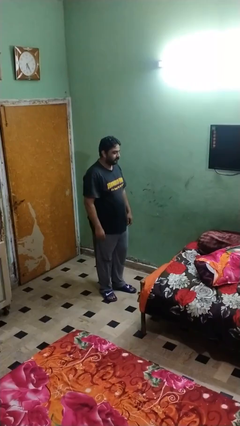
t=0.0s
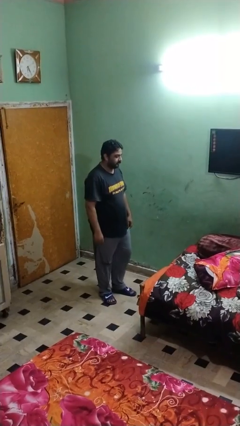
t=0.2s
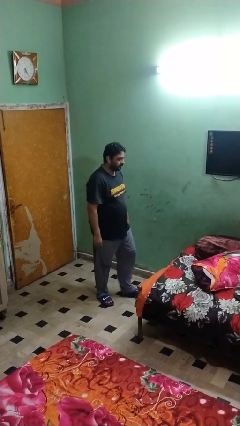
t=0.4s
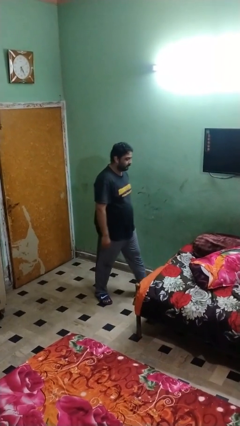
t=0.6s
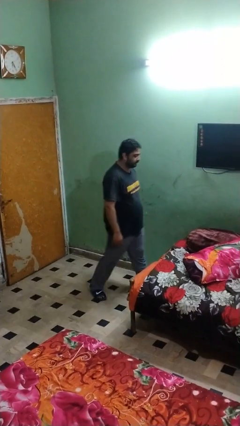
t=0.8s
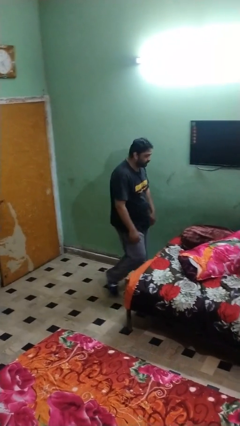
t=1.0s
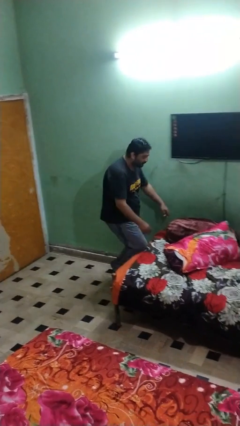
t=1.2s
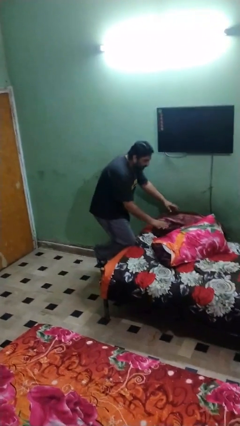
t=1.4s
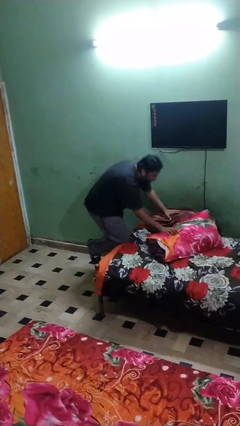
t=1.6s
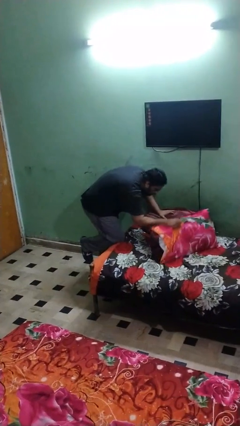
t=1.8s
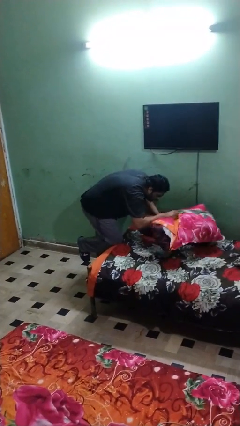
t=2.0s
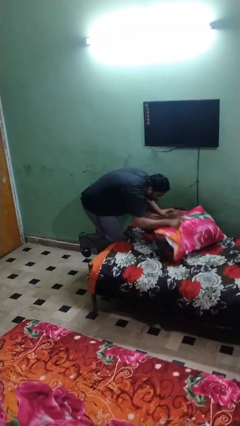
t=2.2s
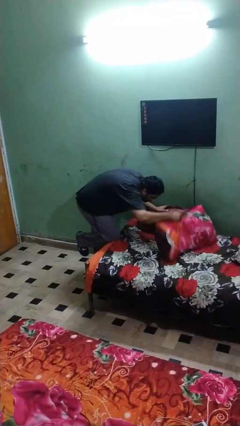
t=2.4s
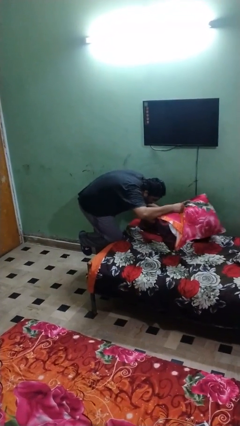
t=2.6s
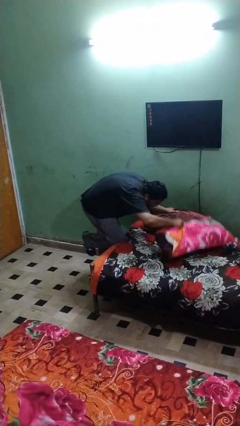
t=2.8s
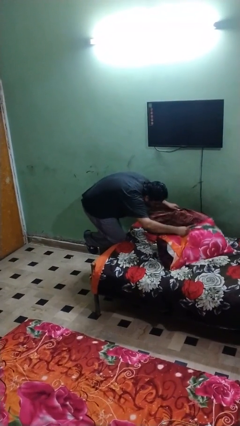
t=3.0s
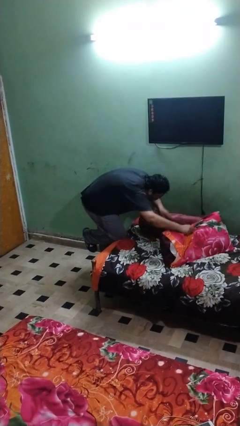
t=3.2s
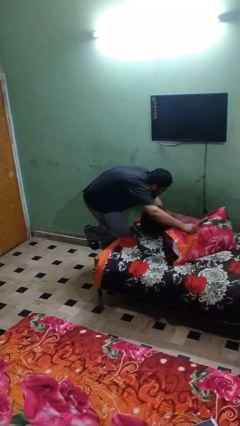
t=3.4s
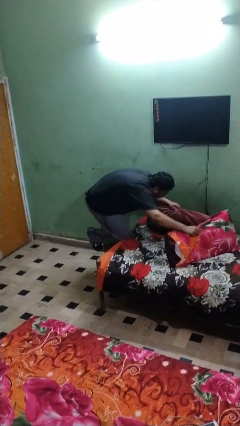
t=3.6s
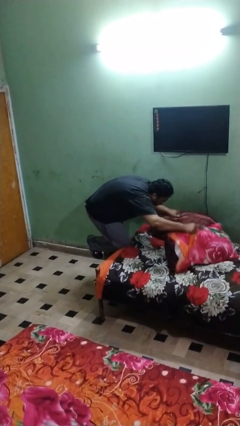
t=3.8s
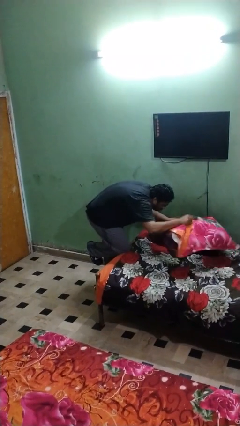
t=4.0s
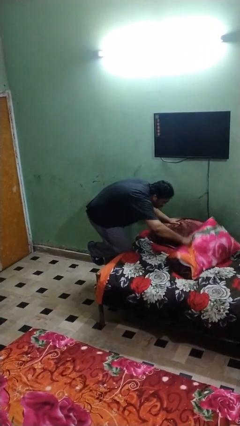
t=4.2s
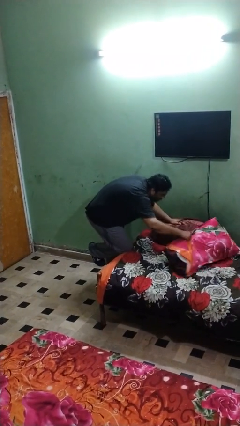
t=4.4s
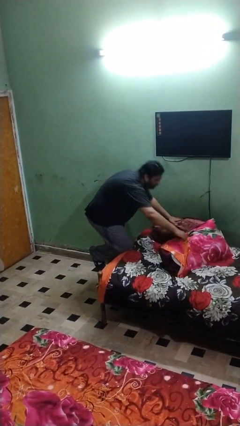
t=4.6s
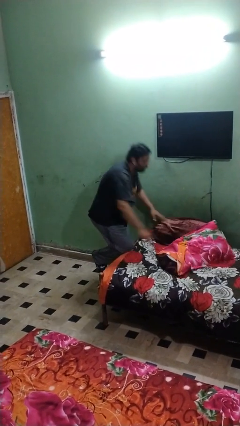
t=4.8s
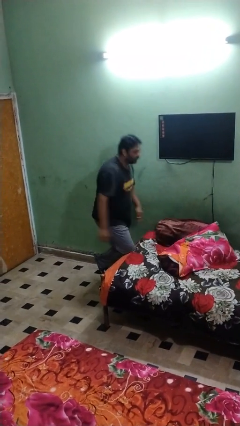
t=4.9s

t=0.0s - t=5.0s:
person searches in couch

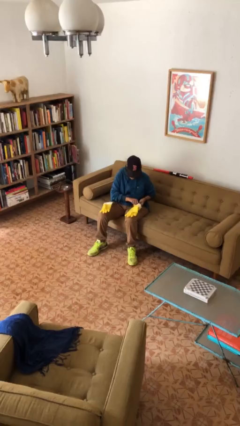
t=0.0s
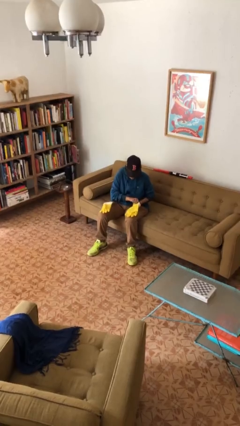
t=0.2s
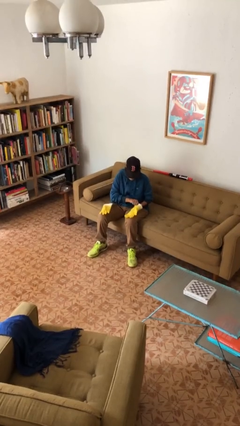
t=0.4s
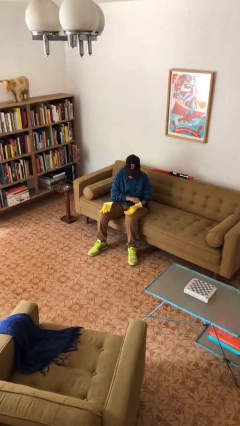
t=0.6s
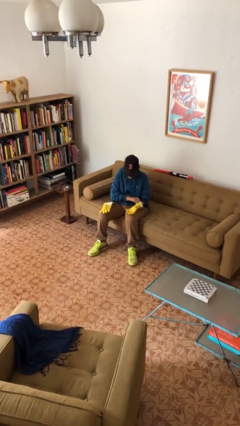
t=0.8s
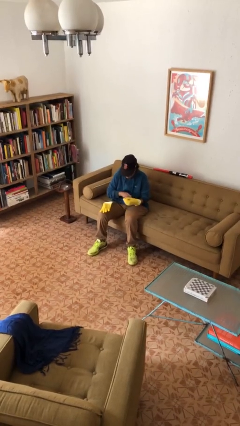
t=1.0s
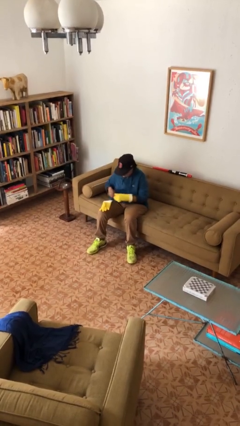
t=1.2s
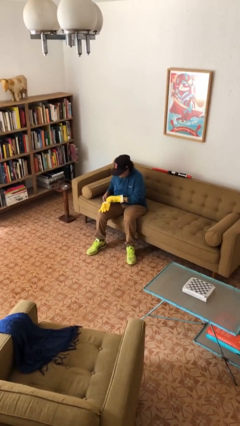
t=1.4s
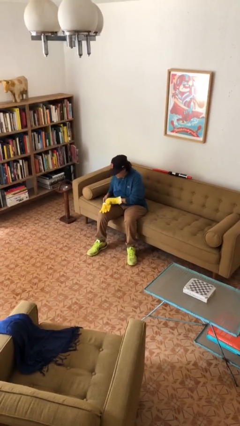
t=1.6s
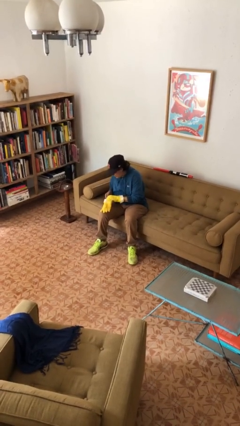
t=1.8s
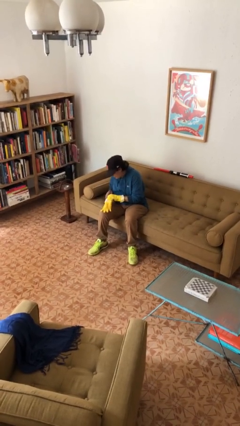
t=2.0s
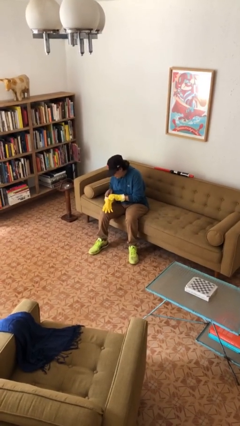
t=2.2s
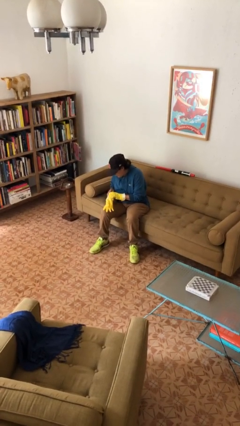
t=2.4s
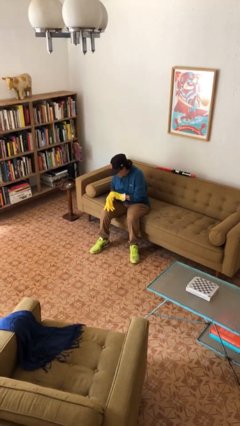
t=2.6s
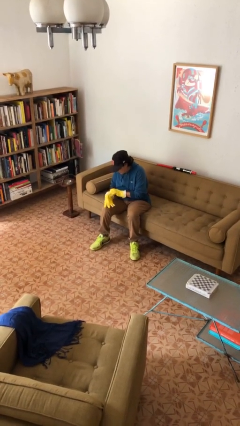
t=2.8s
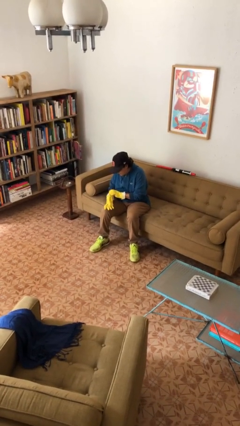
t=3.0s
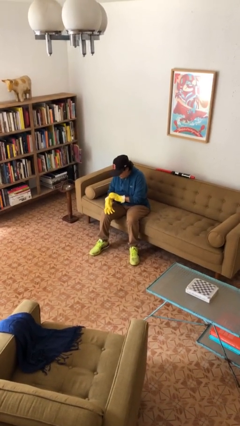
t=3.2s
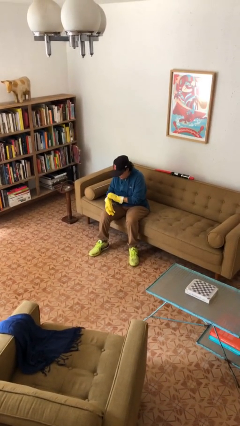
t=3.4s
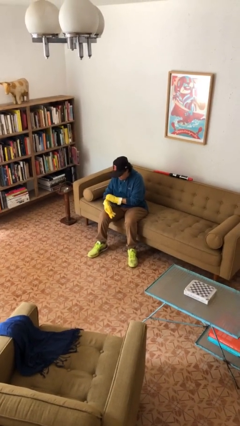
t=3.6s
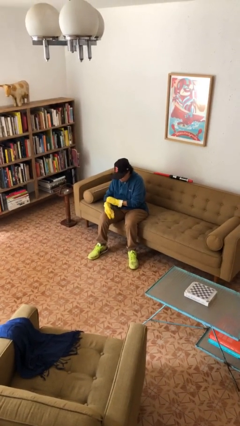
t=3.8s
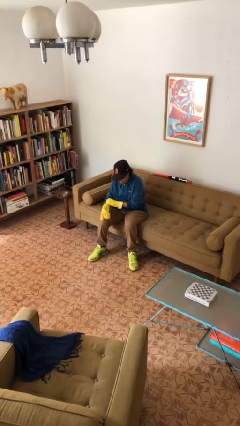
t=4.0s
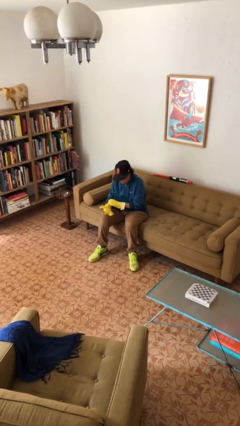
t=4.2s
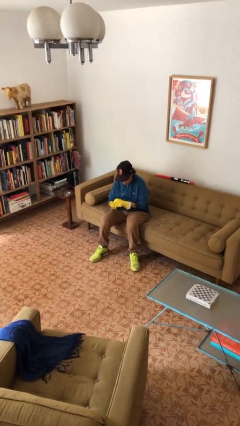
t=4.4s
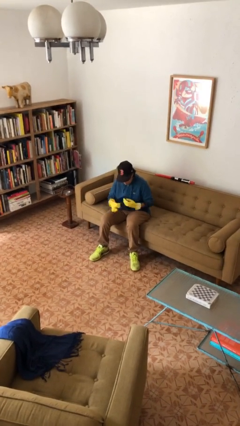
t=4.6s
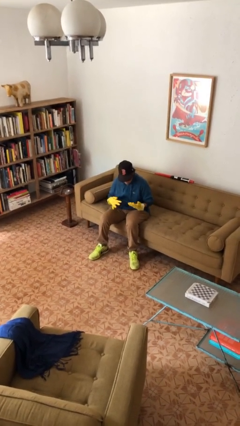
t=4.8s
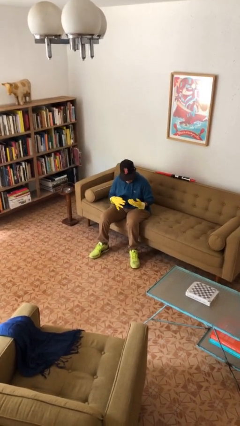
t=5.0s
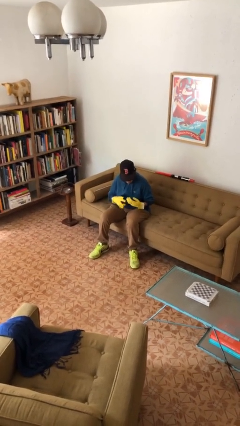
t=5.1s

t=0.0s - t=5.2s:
person puts on gloves

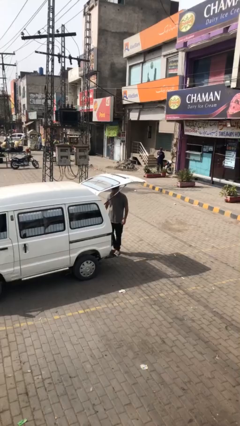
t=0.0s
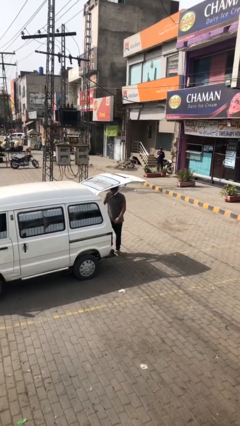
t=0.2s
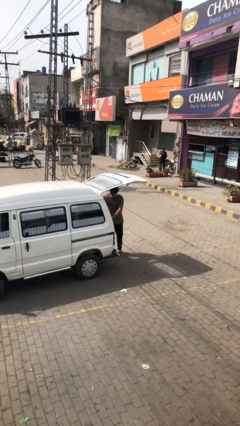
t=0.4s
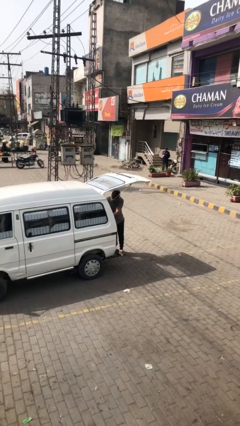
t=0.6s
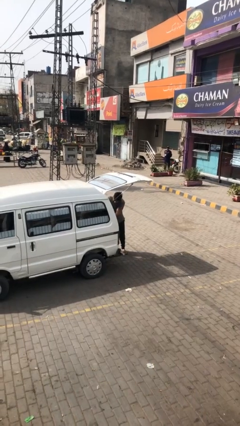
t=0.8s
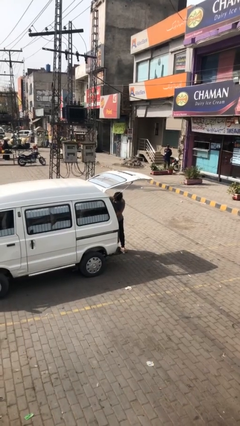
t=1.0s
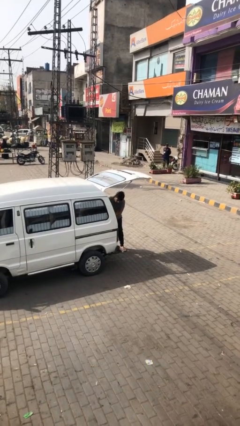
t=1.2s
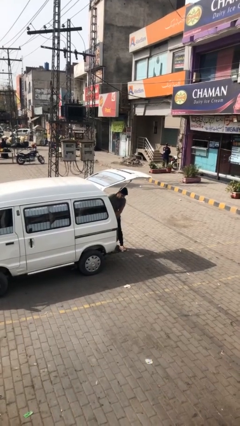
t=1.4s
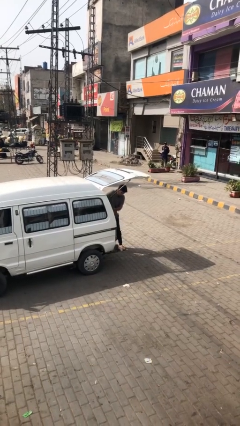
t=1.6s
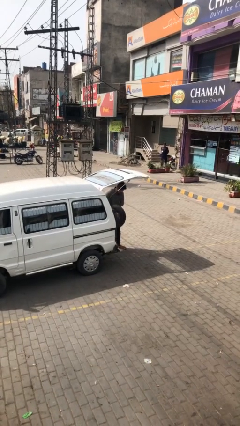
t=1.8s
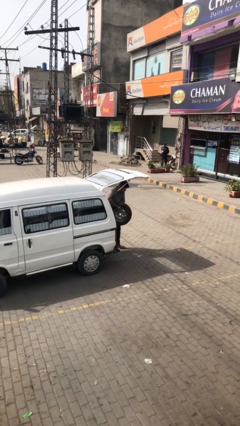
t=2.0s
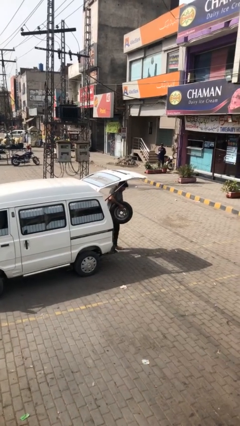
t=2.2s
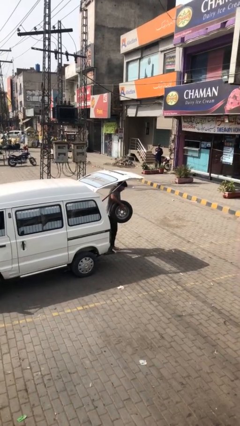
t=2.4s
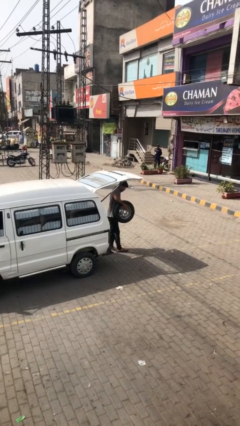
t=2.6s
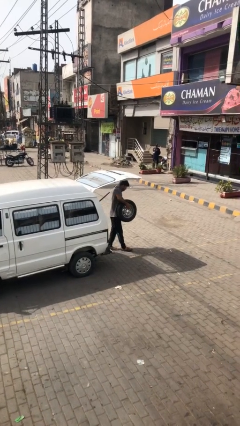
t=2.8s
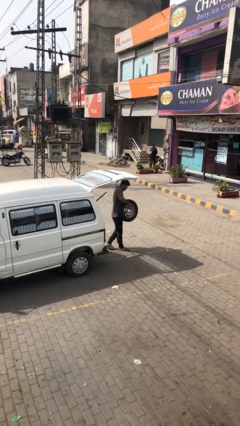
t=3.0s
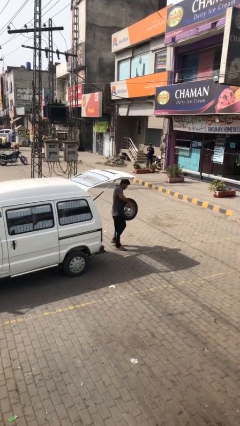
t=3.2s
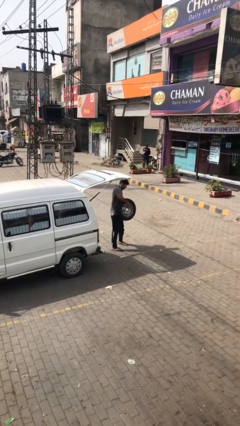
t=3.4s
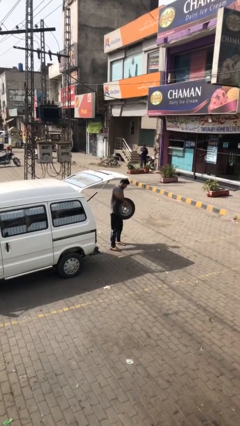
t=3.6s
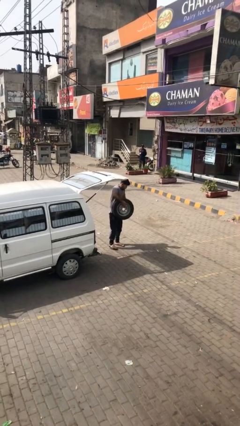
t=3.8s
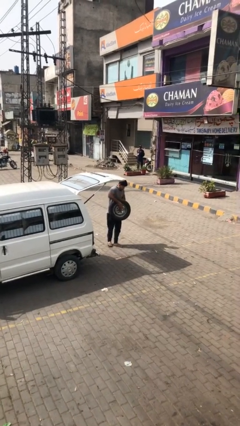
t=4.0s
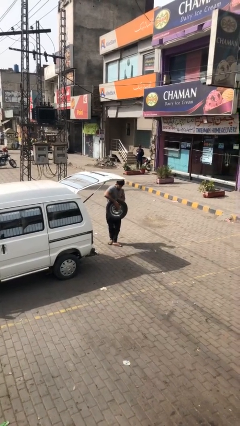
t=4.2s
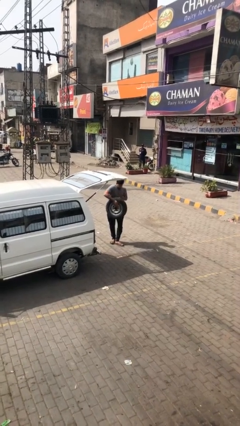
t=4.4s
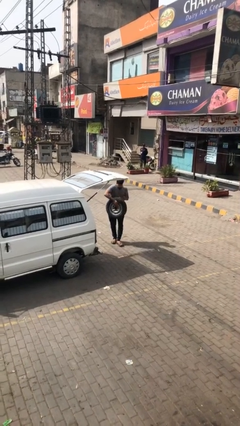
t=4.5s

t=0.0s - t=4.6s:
person unloads car

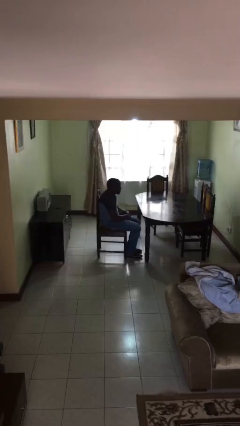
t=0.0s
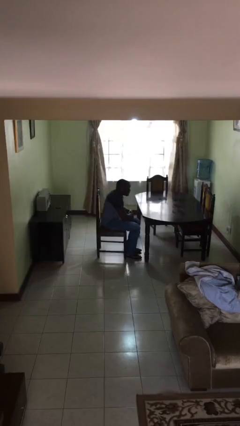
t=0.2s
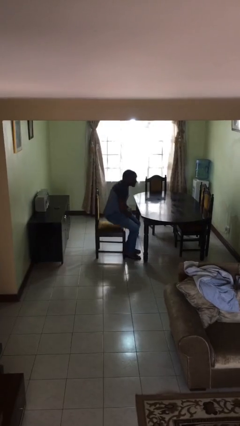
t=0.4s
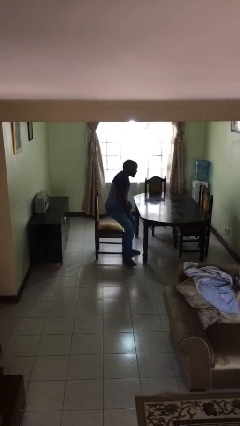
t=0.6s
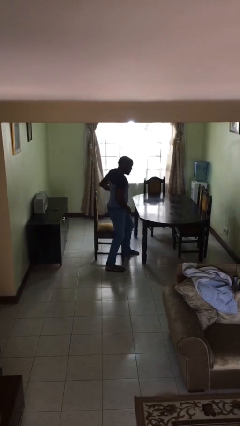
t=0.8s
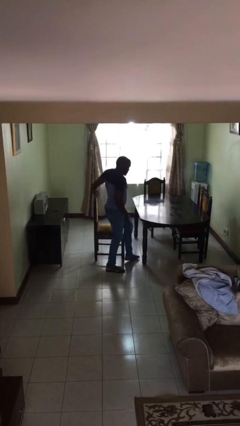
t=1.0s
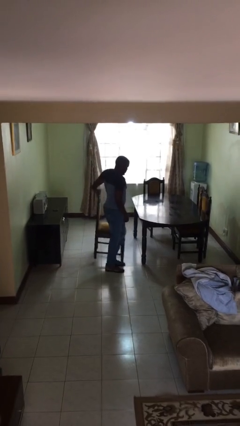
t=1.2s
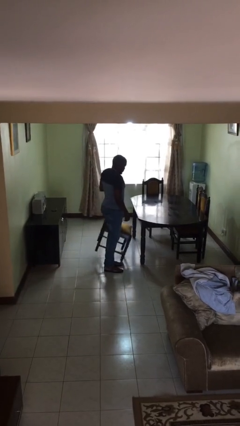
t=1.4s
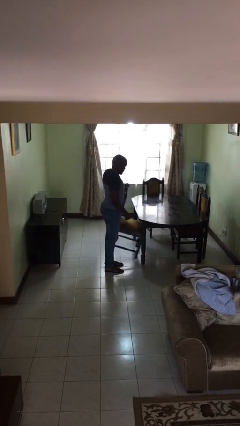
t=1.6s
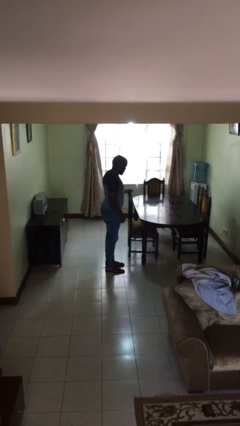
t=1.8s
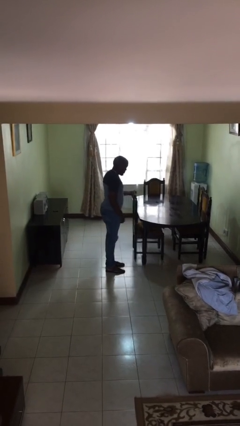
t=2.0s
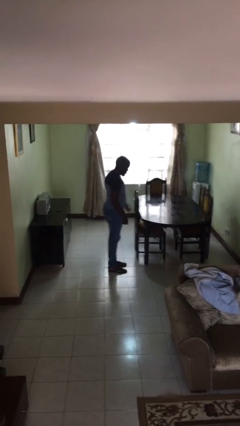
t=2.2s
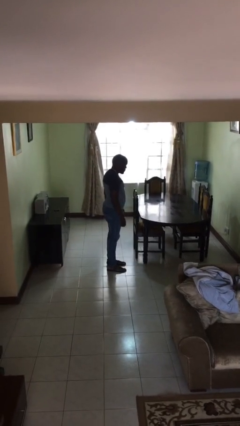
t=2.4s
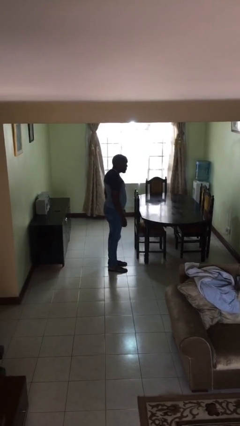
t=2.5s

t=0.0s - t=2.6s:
person stands up

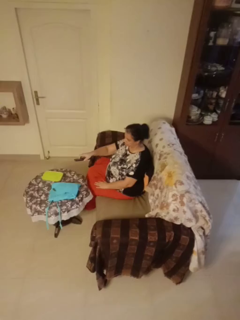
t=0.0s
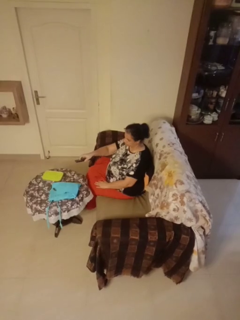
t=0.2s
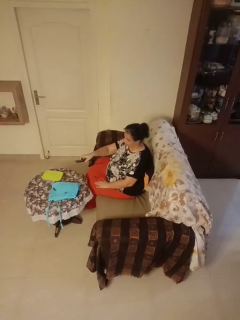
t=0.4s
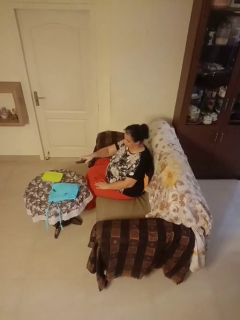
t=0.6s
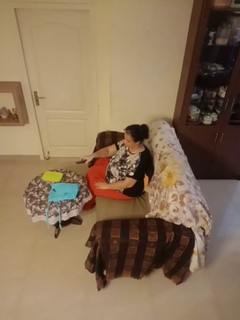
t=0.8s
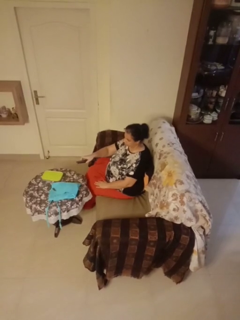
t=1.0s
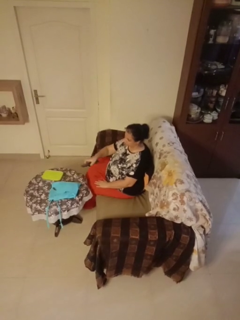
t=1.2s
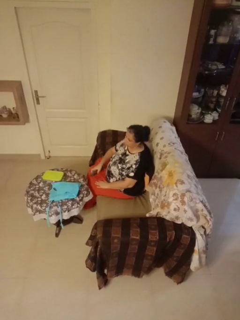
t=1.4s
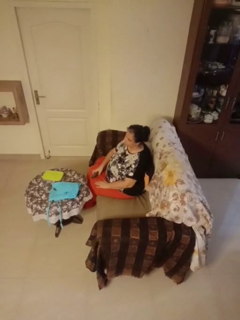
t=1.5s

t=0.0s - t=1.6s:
person uses television remote
